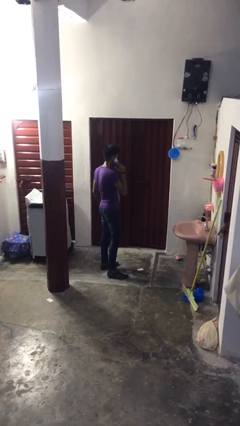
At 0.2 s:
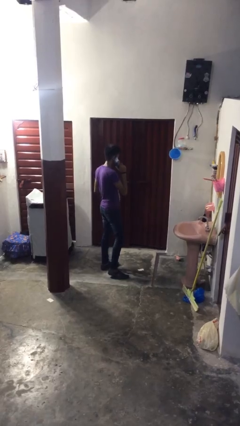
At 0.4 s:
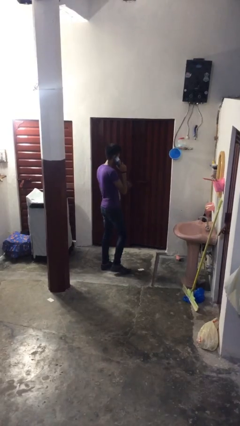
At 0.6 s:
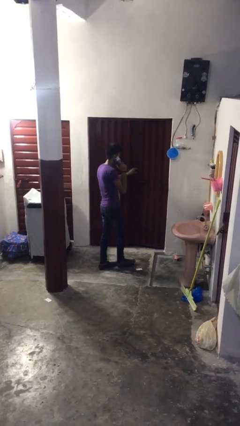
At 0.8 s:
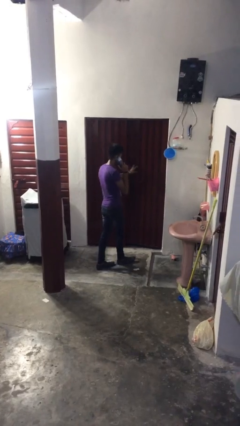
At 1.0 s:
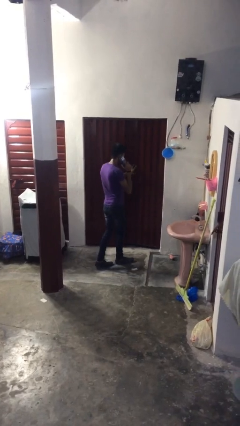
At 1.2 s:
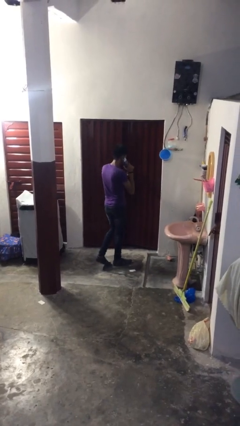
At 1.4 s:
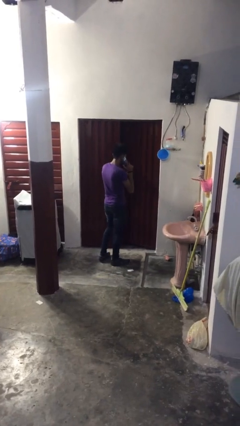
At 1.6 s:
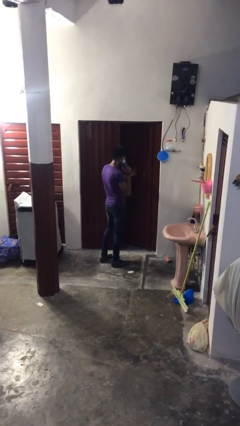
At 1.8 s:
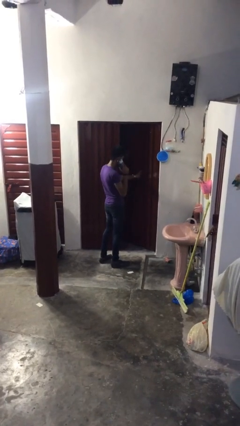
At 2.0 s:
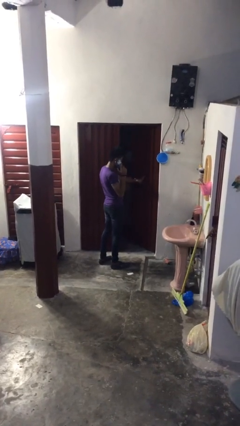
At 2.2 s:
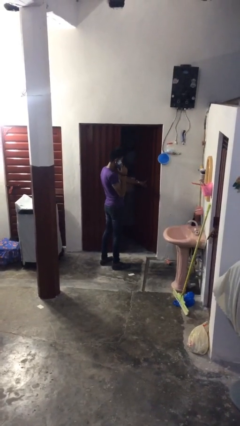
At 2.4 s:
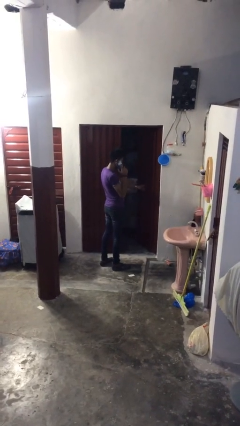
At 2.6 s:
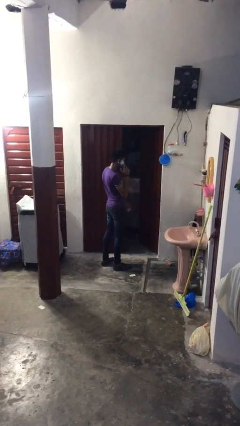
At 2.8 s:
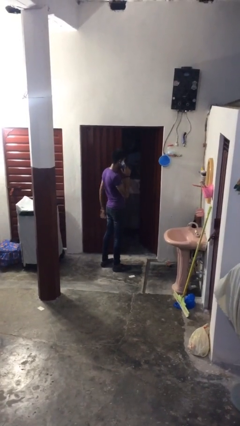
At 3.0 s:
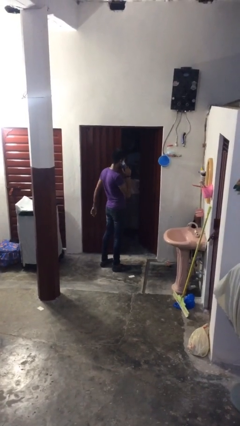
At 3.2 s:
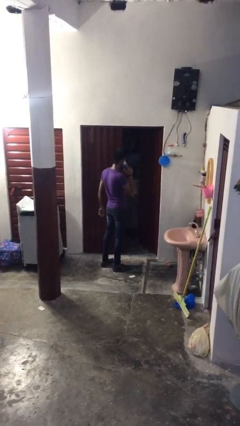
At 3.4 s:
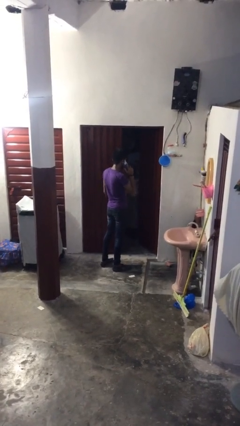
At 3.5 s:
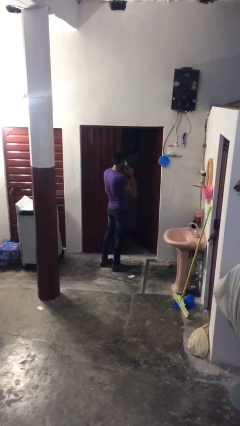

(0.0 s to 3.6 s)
person opens facility door

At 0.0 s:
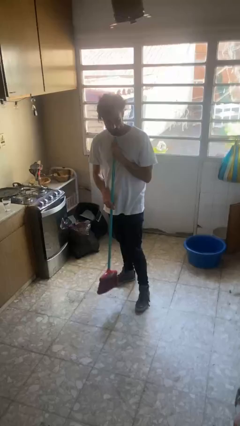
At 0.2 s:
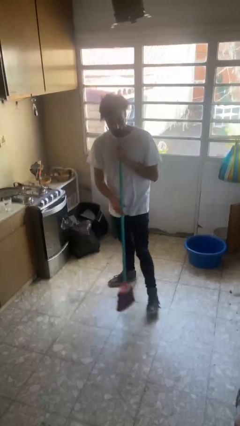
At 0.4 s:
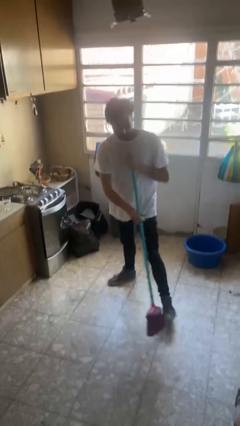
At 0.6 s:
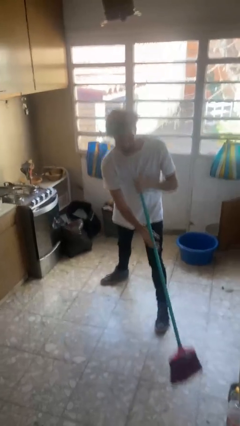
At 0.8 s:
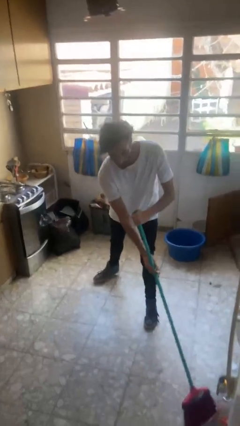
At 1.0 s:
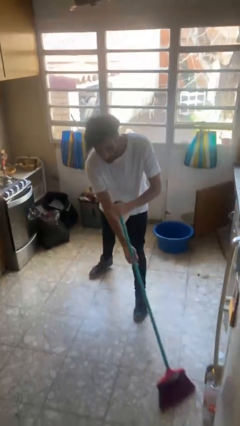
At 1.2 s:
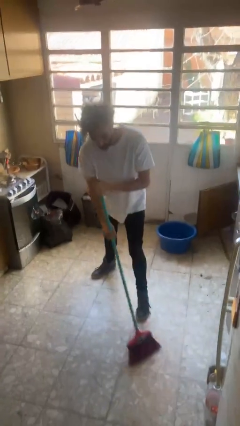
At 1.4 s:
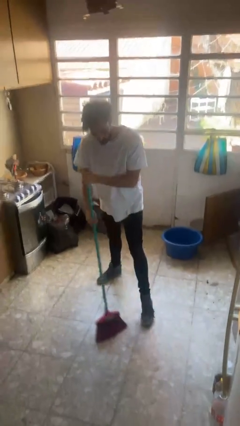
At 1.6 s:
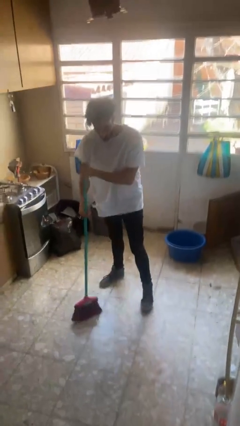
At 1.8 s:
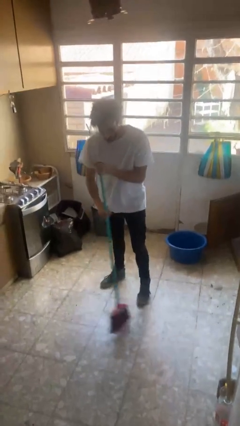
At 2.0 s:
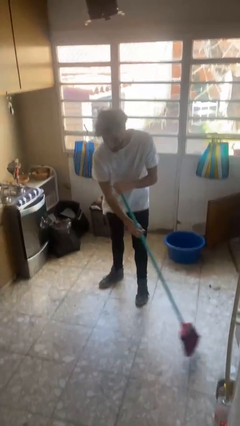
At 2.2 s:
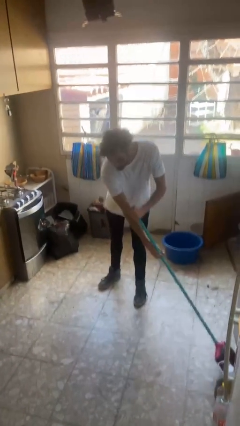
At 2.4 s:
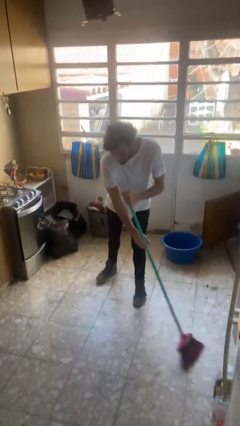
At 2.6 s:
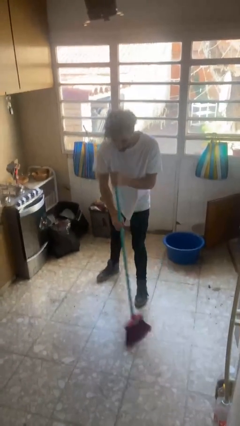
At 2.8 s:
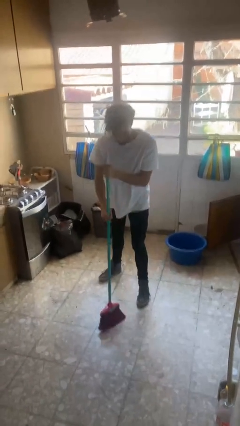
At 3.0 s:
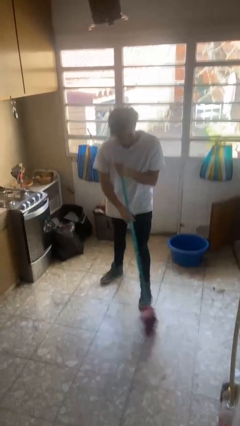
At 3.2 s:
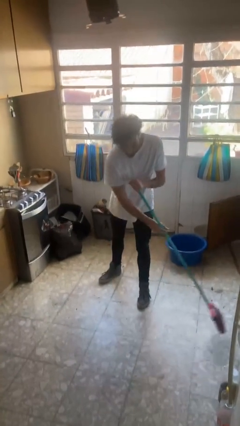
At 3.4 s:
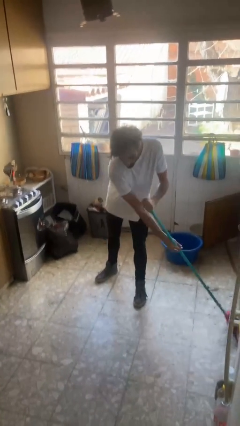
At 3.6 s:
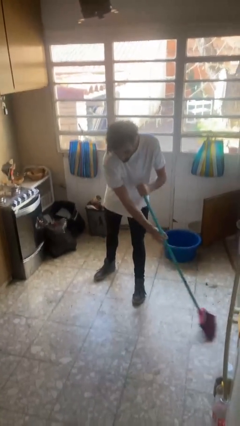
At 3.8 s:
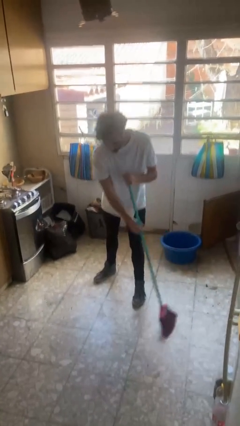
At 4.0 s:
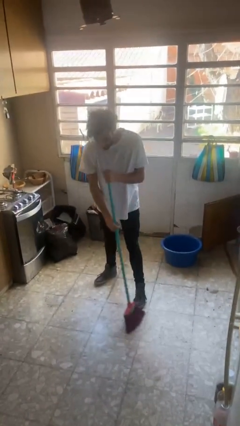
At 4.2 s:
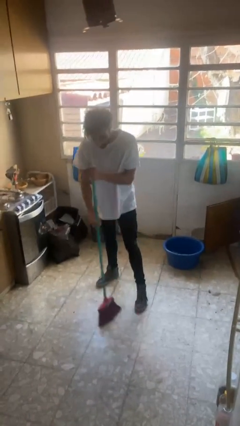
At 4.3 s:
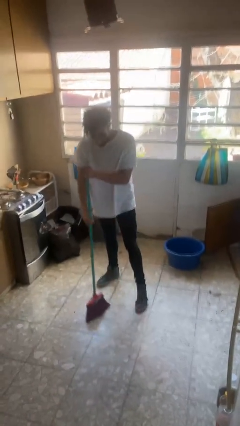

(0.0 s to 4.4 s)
person sweeps floor

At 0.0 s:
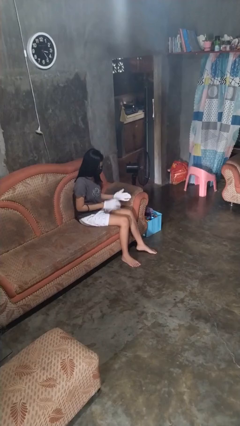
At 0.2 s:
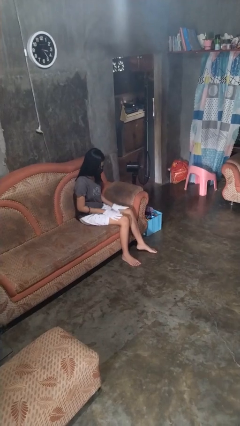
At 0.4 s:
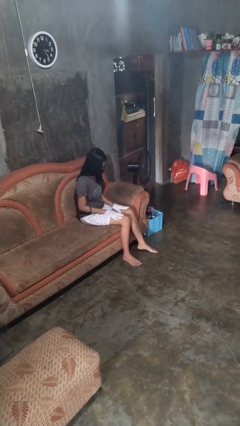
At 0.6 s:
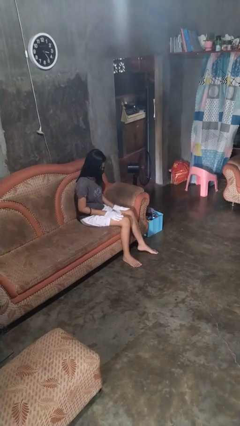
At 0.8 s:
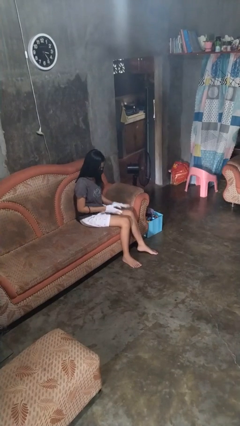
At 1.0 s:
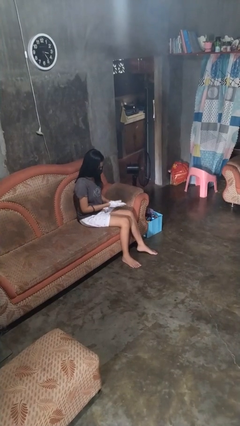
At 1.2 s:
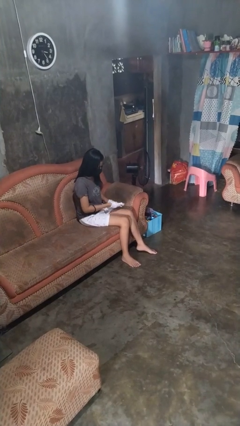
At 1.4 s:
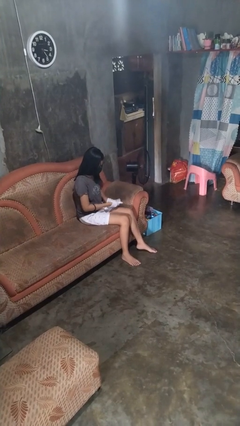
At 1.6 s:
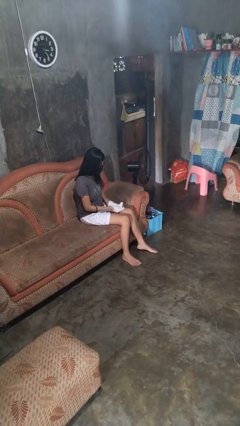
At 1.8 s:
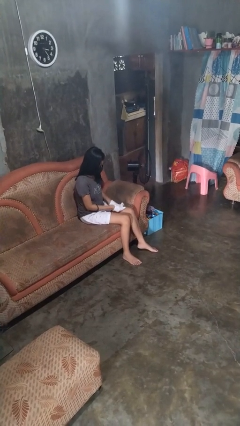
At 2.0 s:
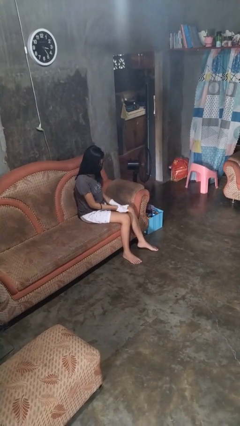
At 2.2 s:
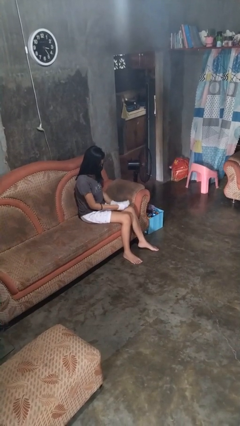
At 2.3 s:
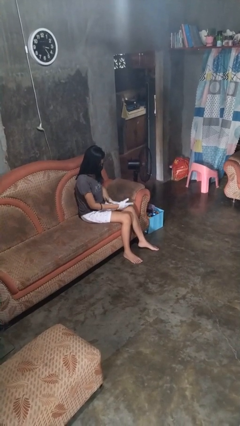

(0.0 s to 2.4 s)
person takes off gloves

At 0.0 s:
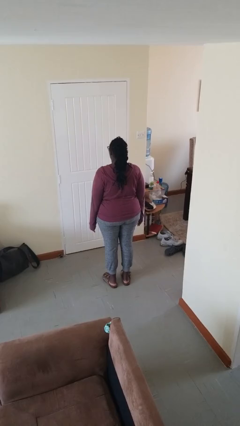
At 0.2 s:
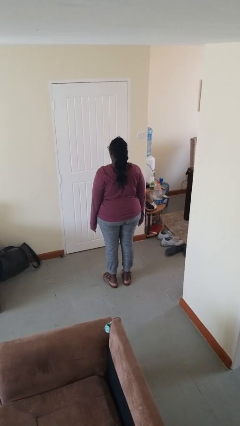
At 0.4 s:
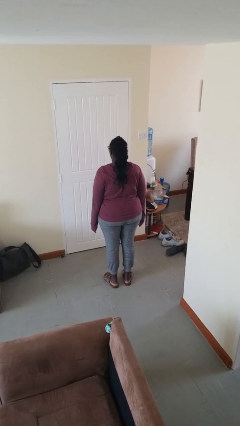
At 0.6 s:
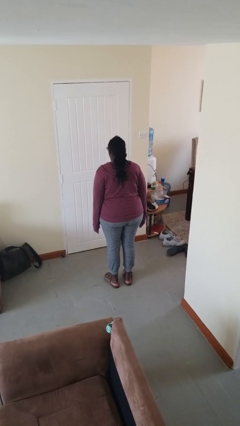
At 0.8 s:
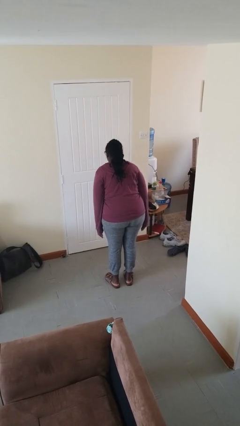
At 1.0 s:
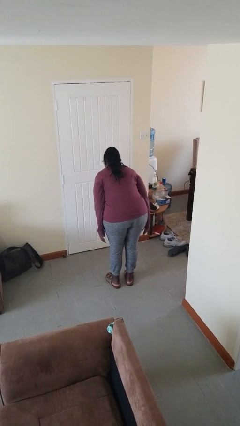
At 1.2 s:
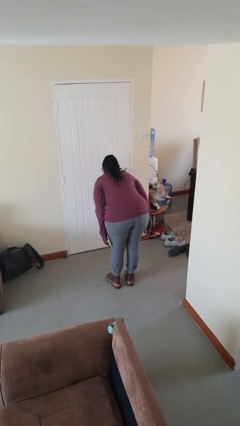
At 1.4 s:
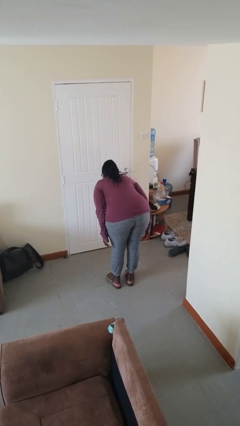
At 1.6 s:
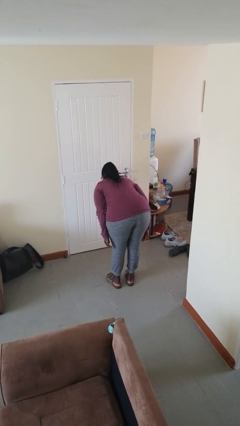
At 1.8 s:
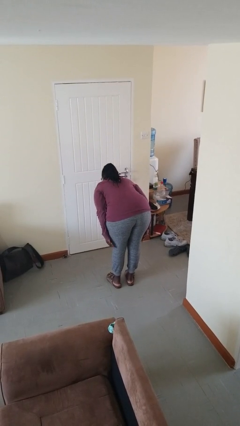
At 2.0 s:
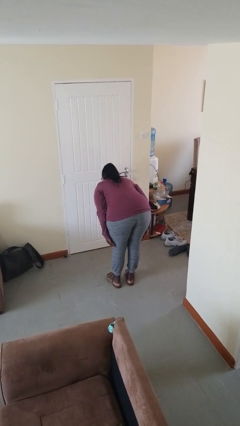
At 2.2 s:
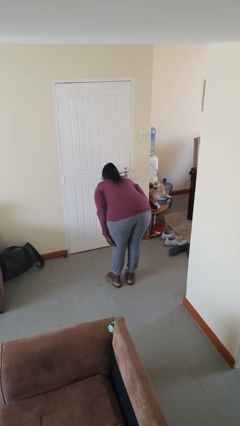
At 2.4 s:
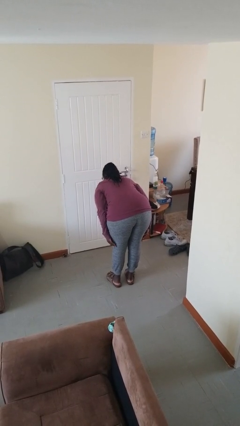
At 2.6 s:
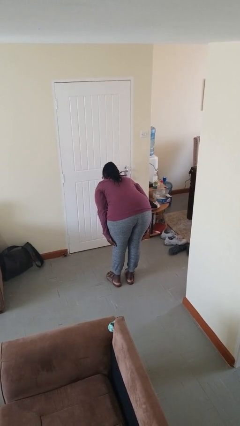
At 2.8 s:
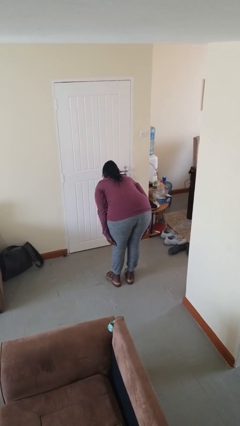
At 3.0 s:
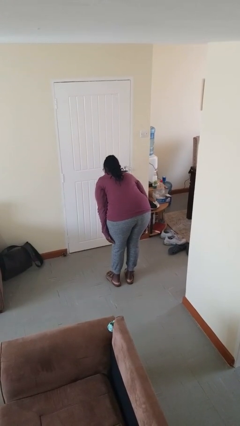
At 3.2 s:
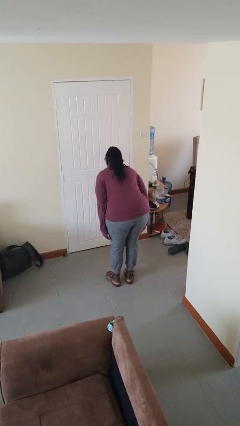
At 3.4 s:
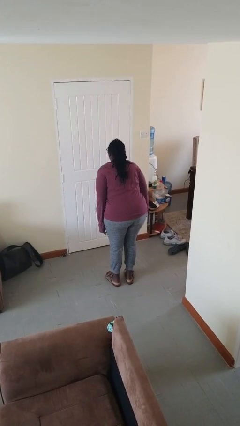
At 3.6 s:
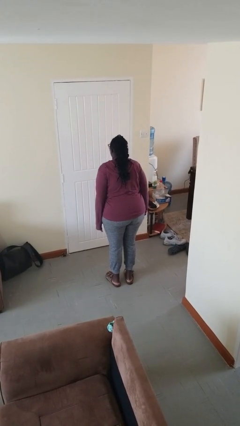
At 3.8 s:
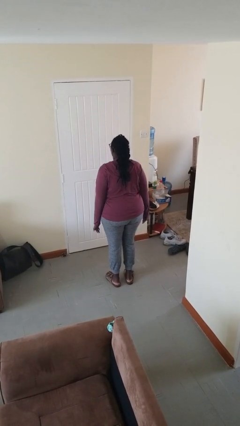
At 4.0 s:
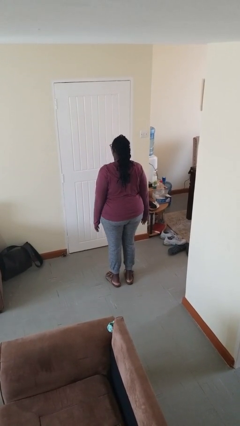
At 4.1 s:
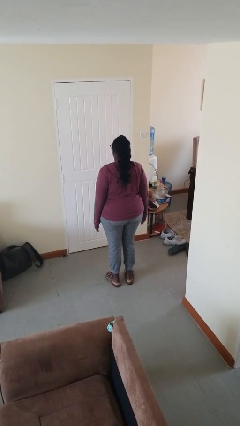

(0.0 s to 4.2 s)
person bows

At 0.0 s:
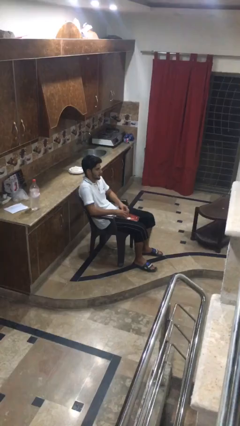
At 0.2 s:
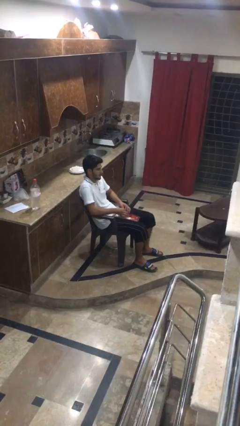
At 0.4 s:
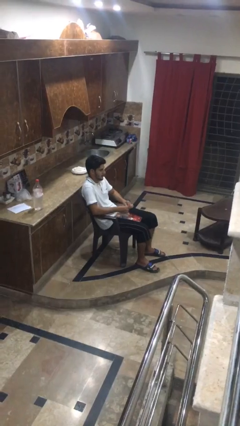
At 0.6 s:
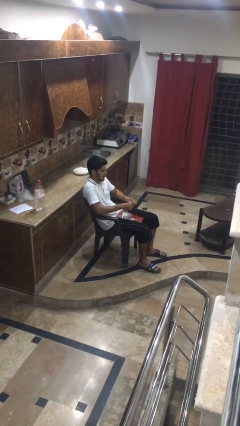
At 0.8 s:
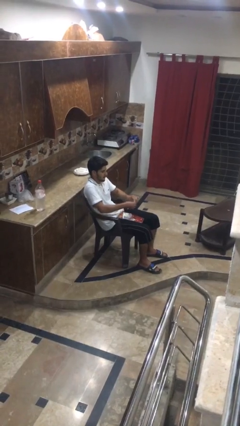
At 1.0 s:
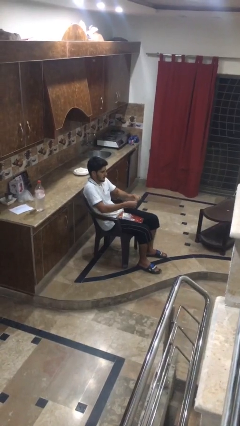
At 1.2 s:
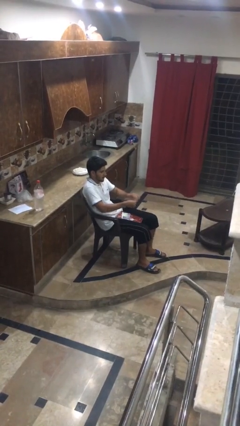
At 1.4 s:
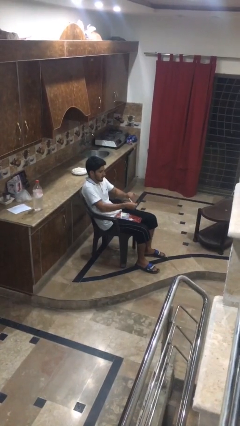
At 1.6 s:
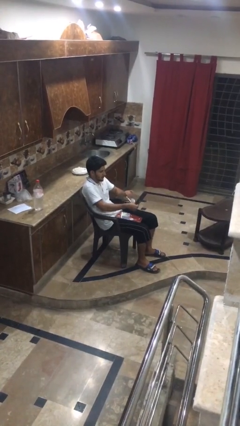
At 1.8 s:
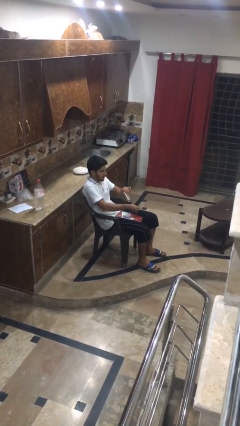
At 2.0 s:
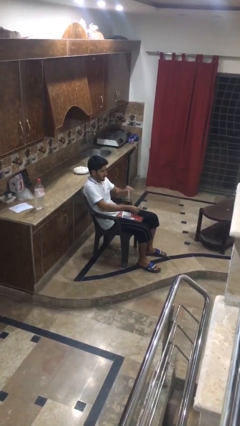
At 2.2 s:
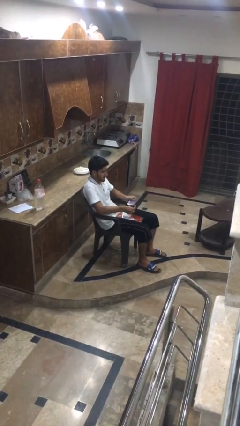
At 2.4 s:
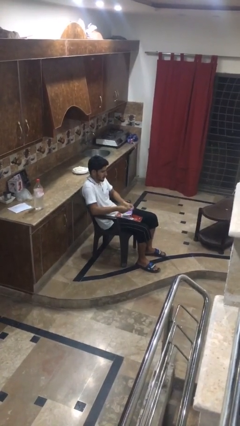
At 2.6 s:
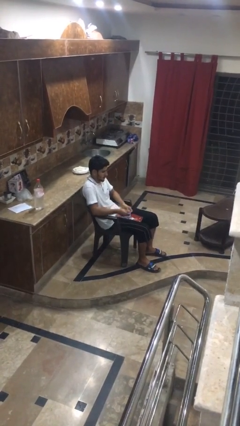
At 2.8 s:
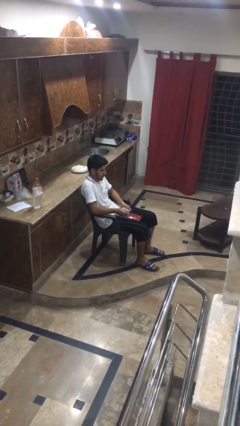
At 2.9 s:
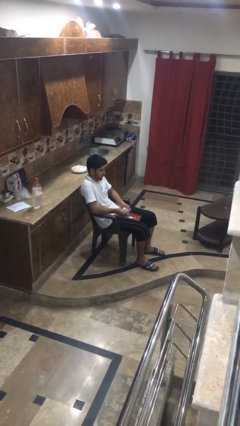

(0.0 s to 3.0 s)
person tears paper
